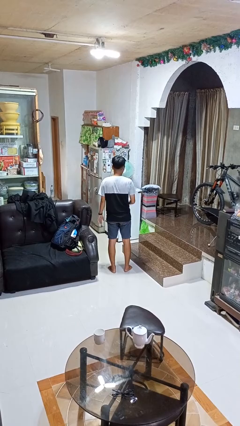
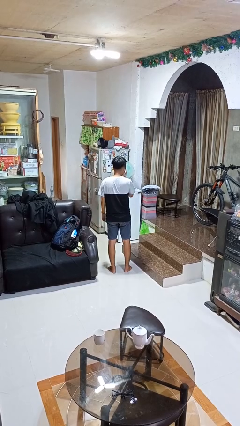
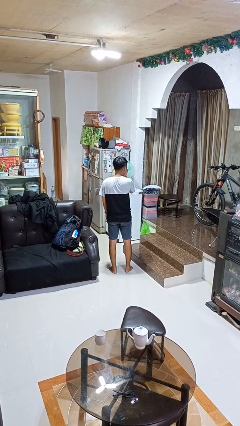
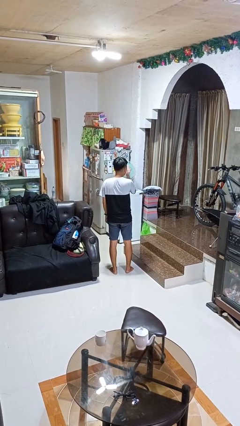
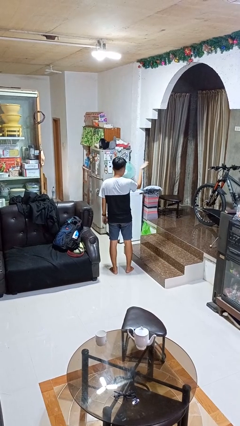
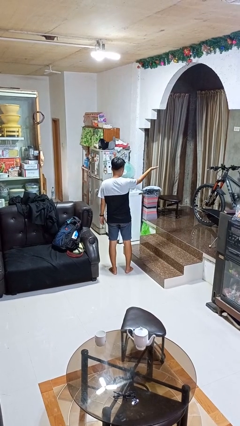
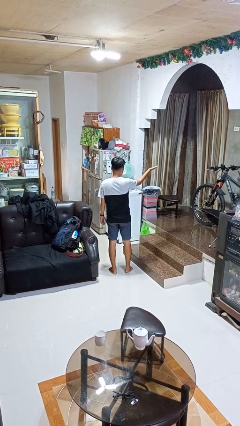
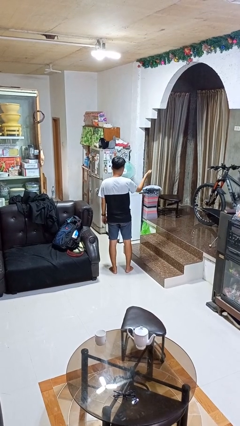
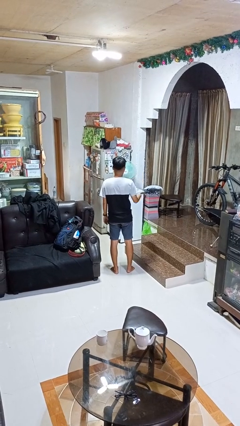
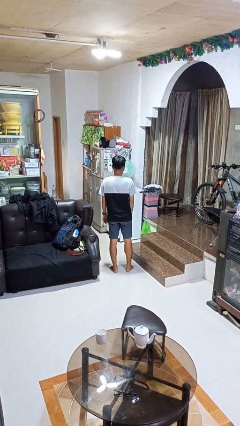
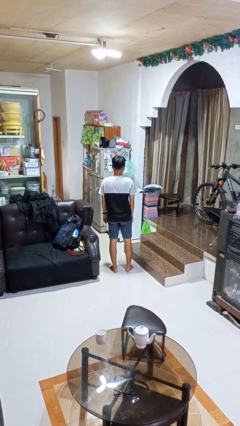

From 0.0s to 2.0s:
person gestures blow kiss

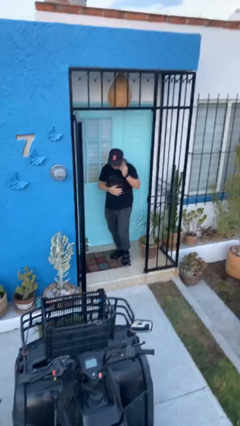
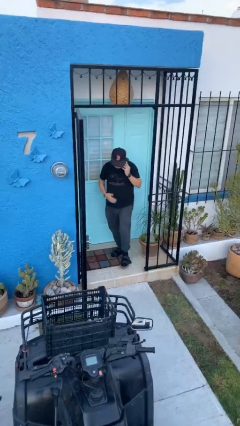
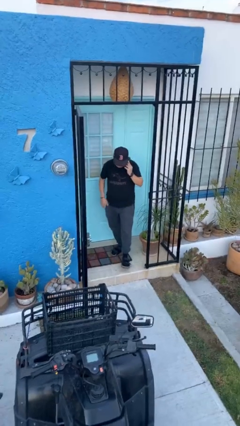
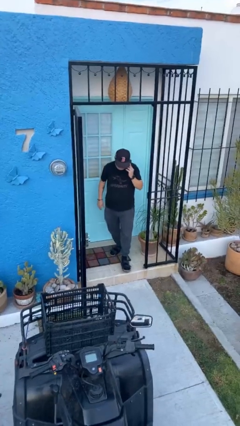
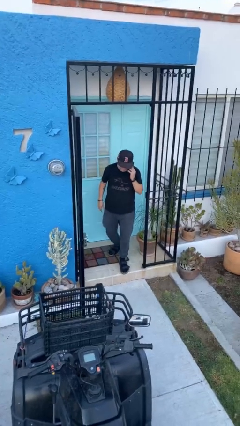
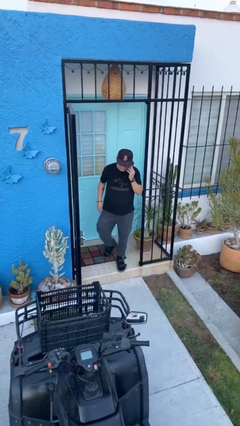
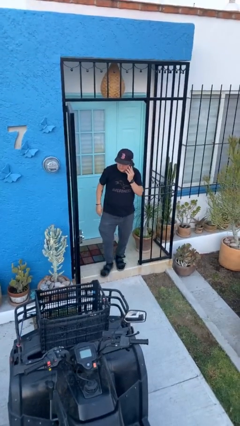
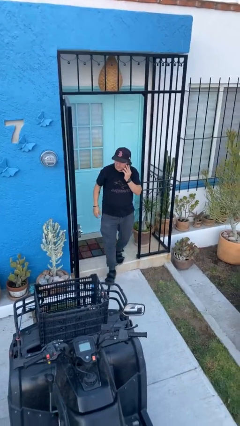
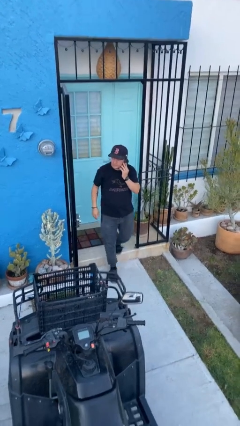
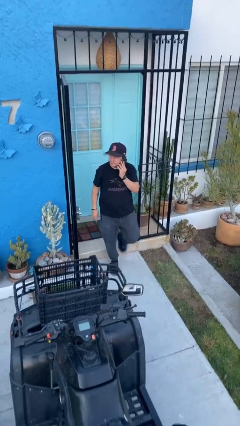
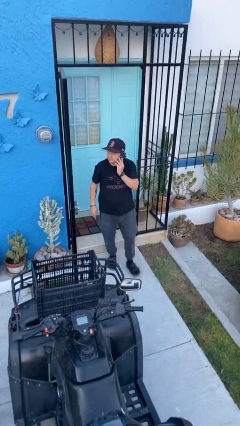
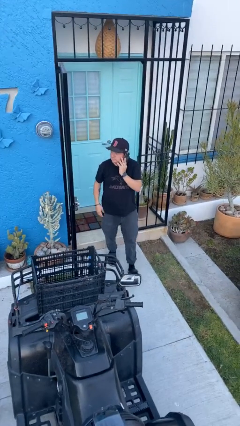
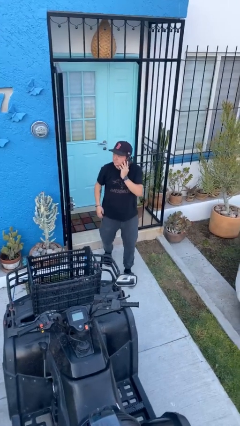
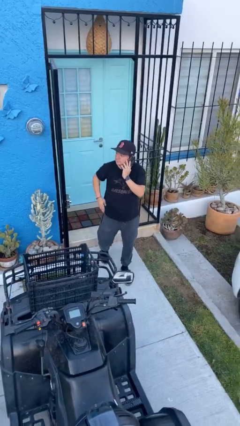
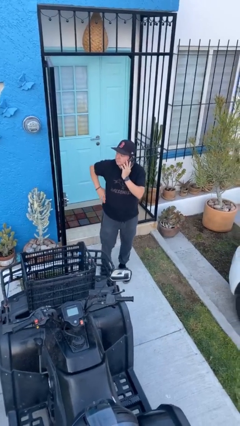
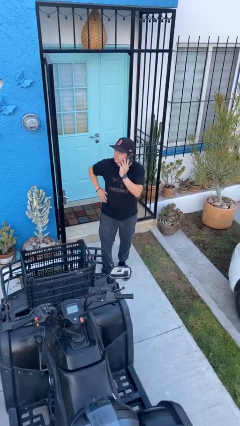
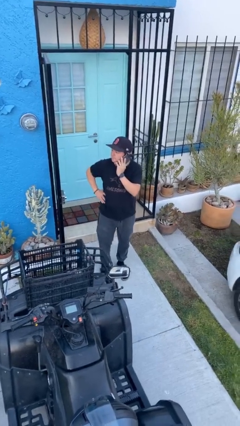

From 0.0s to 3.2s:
person enters scene through structure

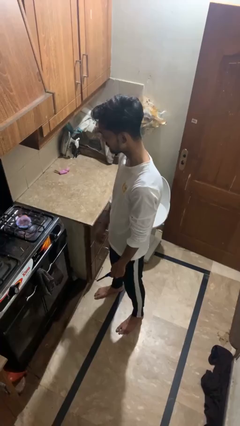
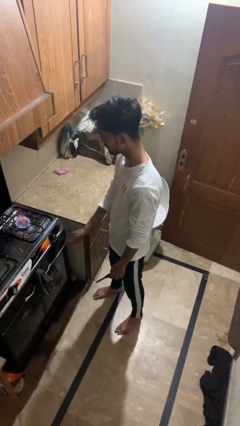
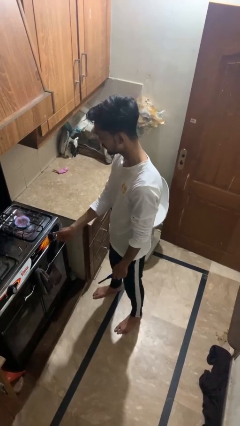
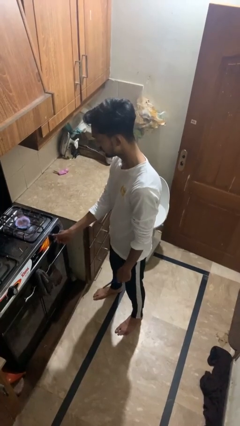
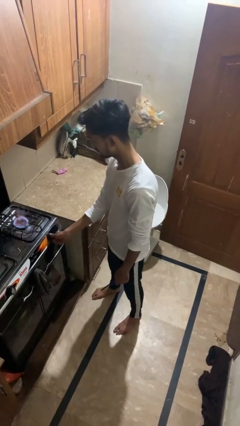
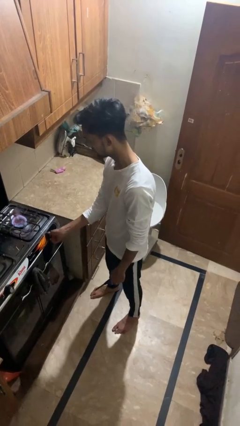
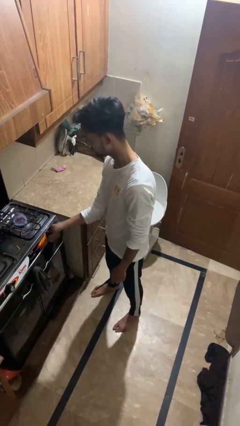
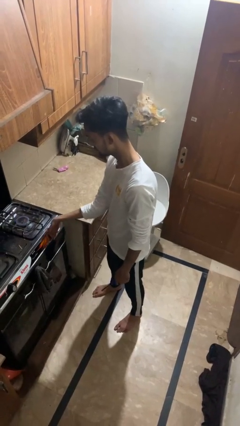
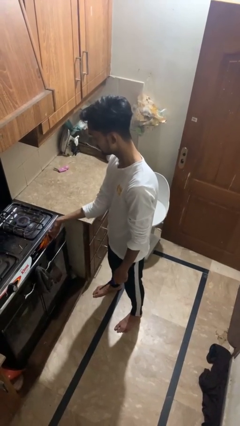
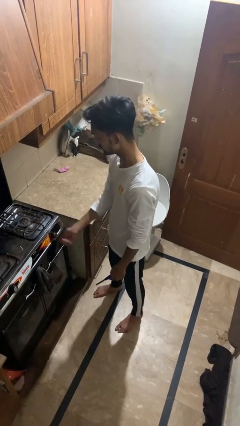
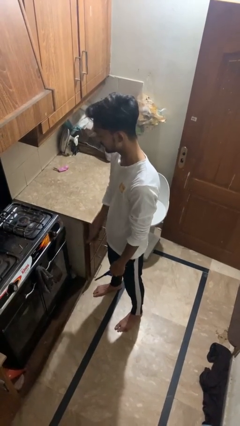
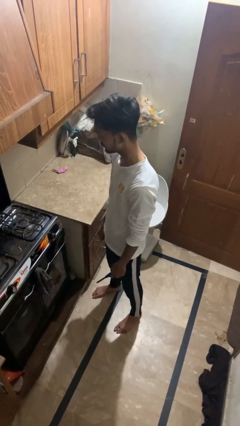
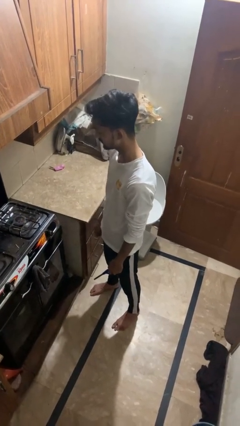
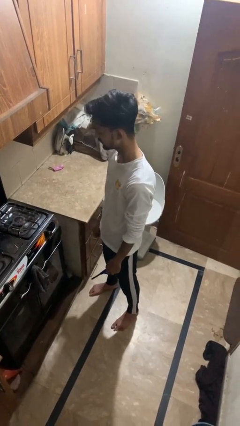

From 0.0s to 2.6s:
person turns off stovetop

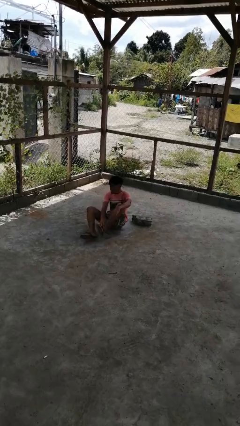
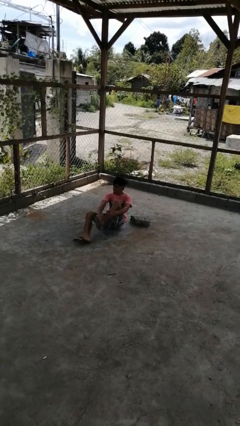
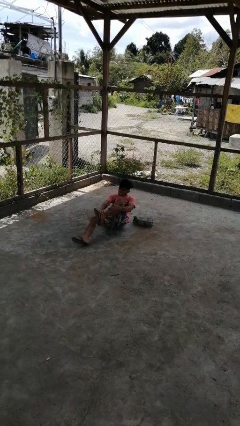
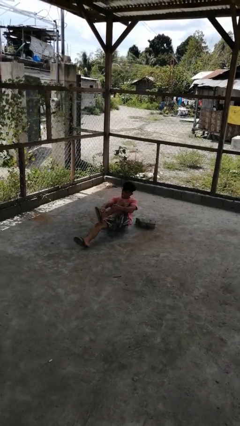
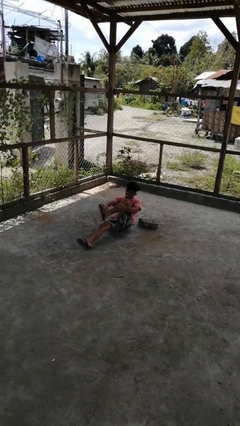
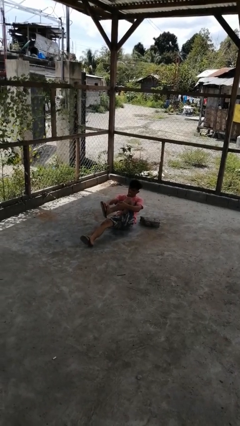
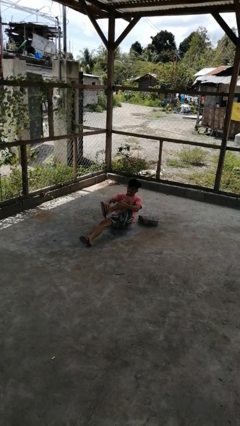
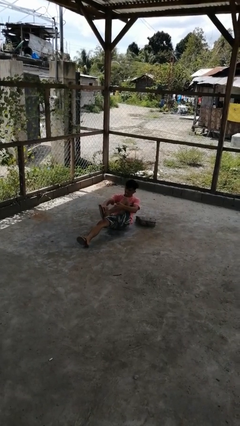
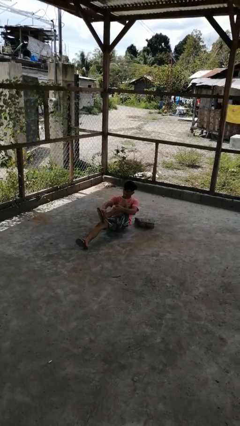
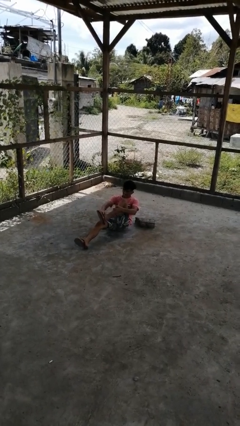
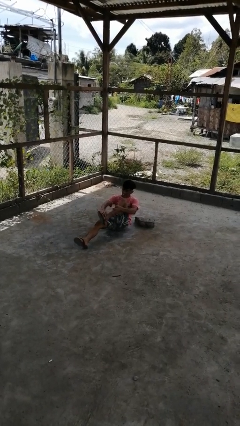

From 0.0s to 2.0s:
person lies down on floor

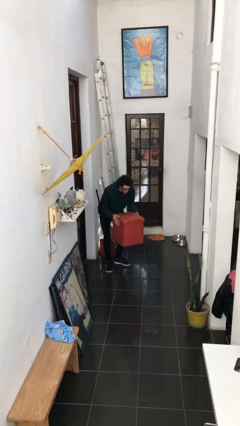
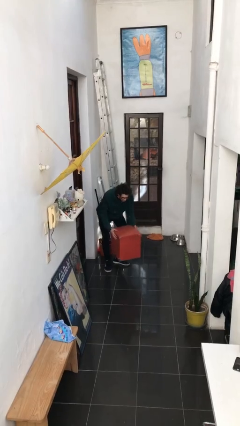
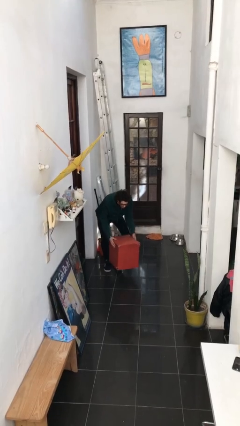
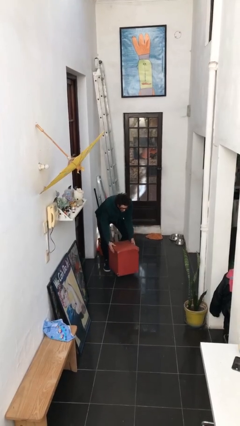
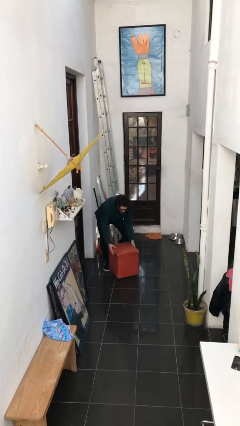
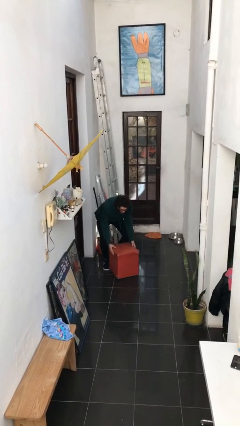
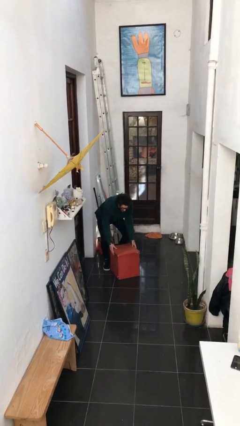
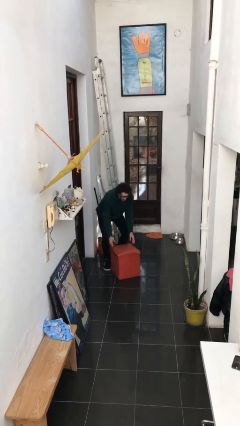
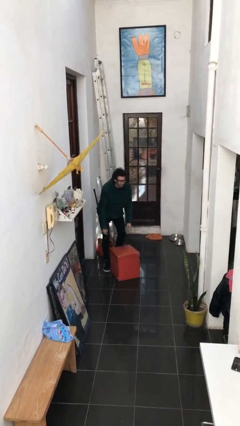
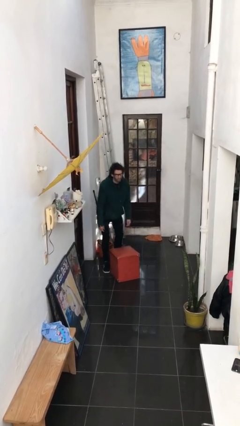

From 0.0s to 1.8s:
person puts down object on floor

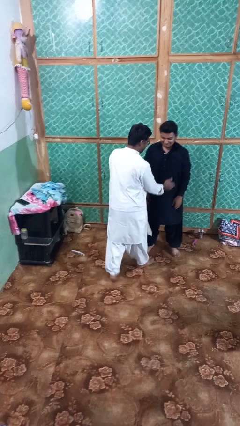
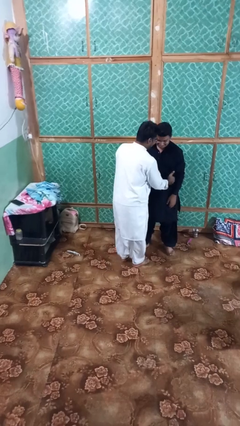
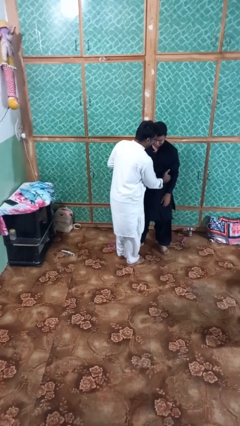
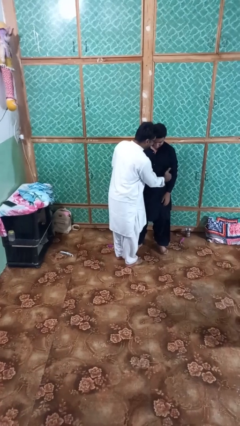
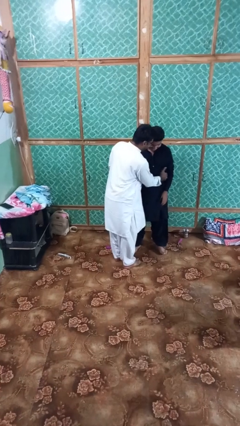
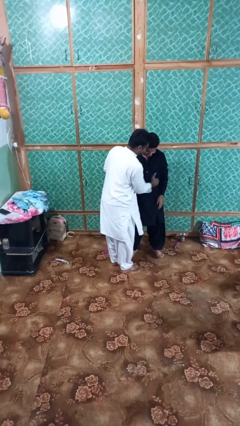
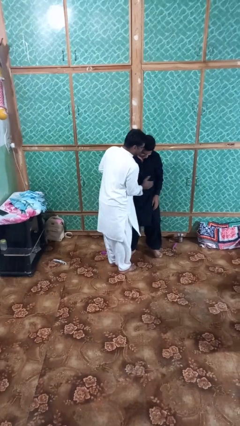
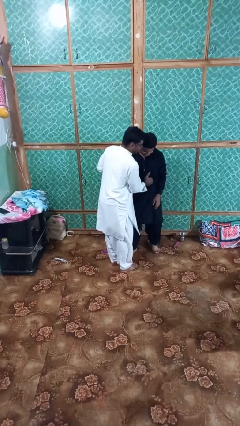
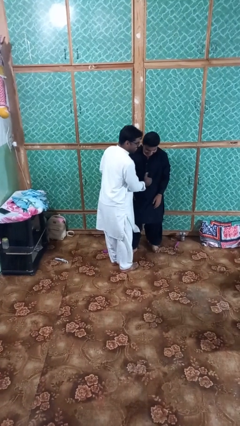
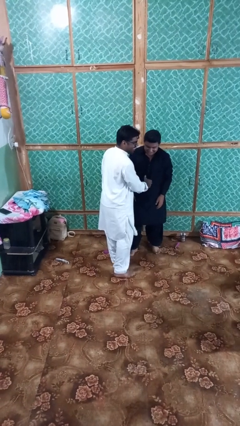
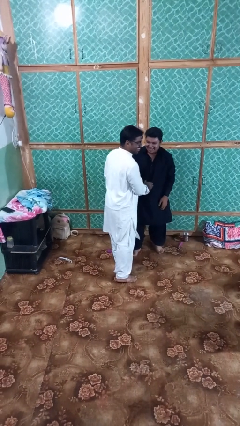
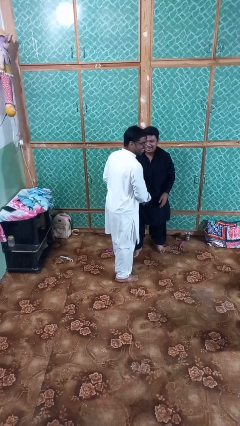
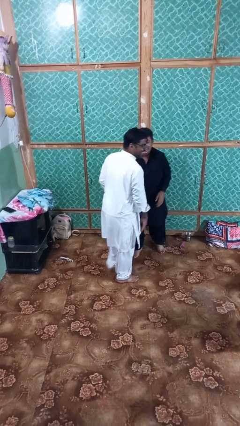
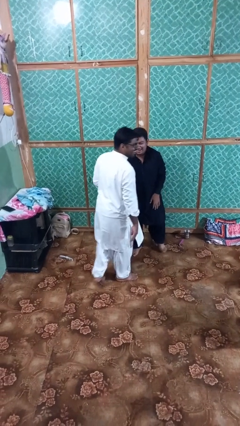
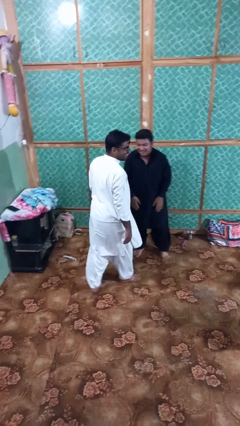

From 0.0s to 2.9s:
person tickles person

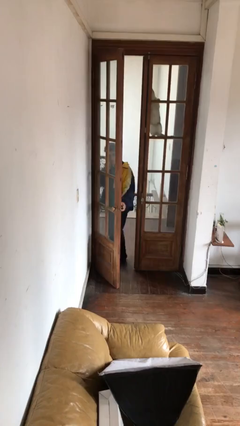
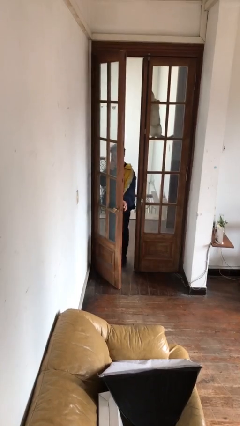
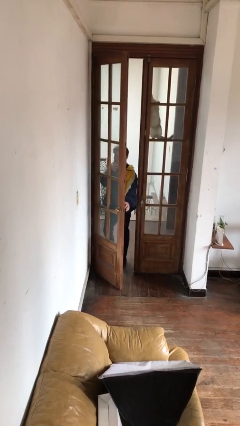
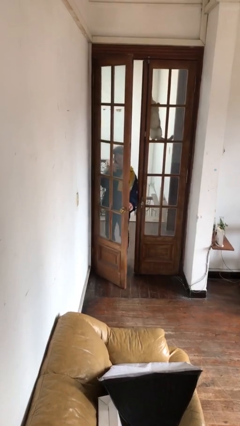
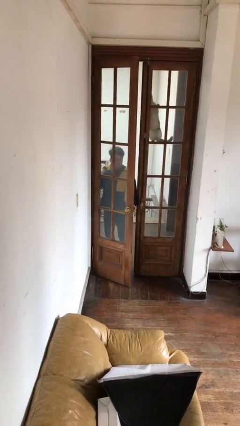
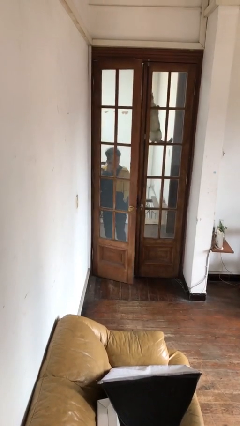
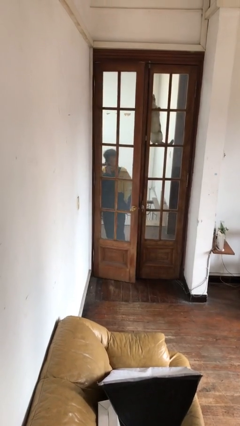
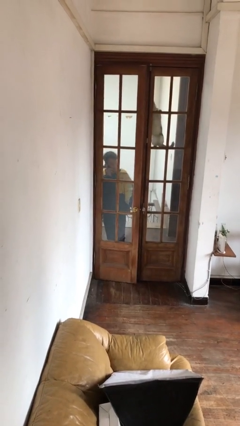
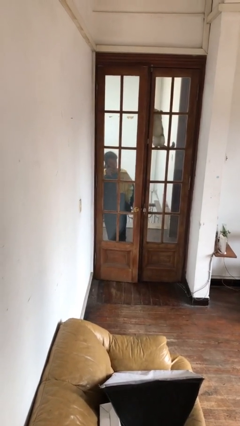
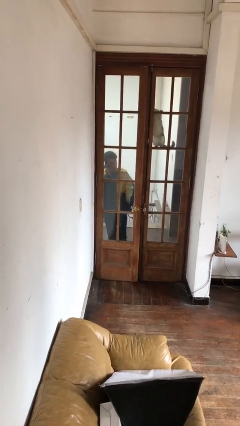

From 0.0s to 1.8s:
person closes facility door

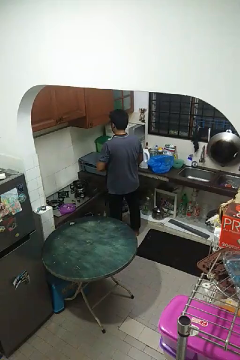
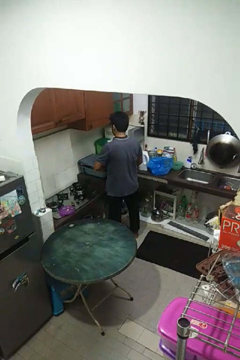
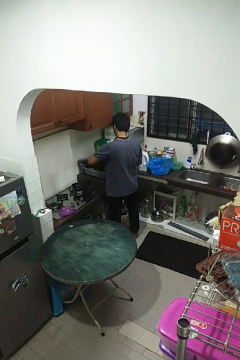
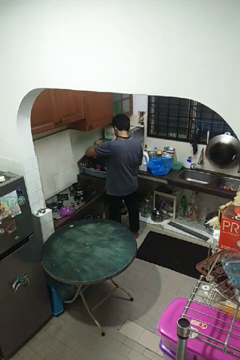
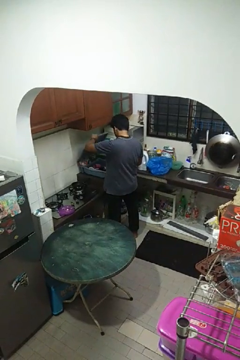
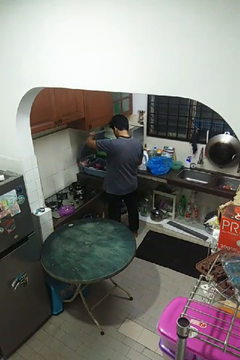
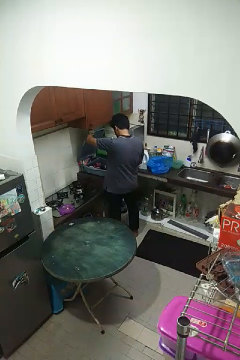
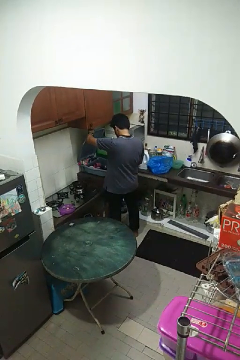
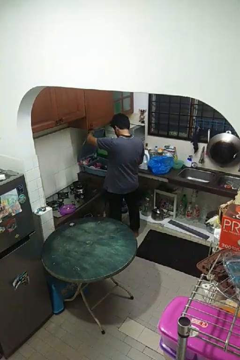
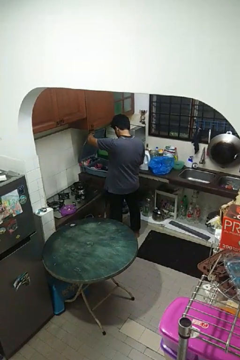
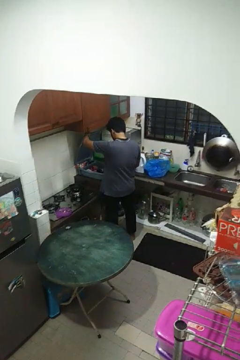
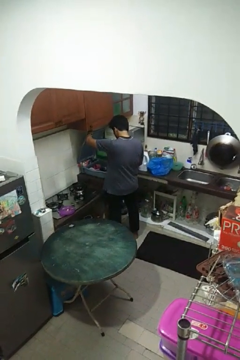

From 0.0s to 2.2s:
person opens dishwasher
